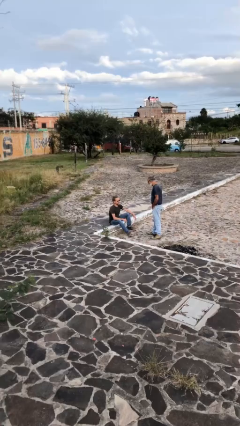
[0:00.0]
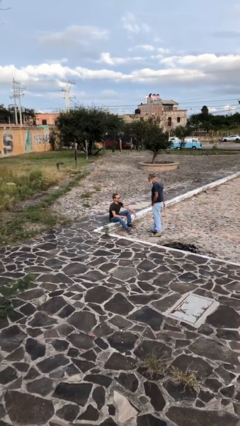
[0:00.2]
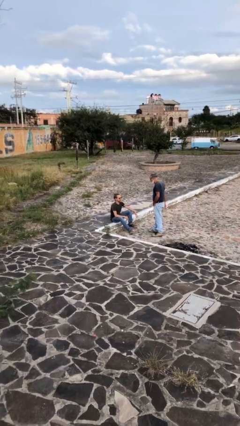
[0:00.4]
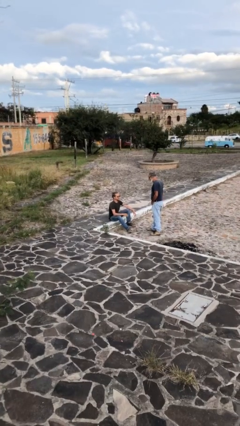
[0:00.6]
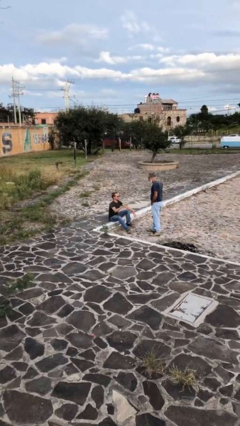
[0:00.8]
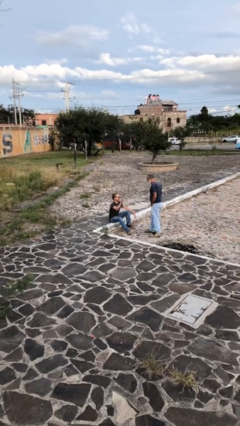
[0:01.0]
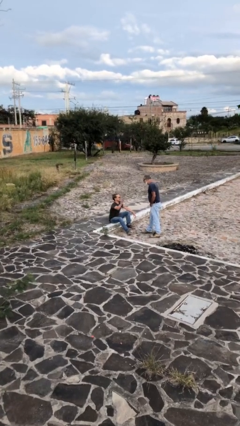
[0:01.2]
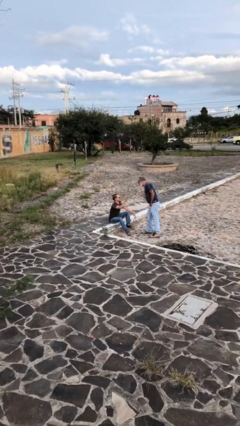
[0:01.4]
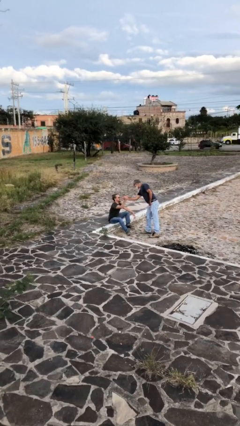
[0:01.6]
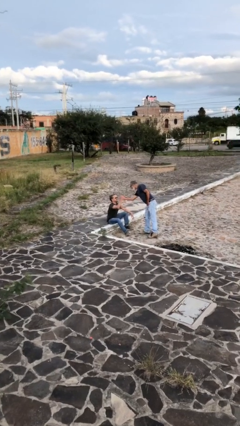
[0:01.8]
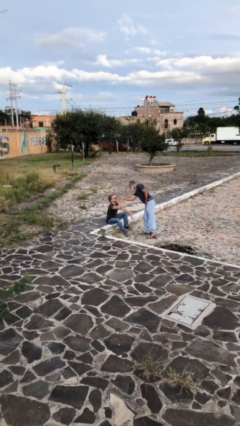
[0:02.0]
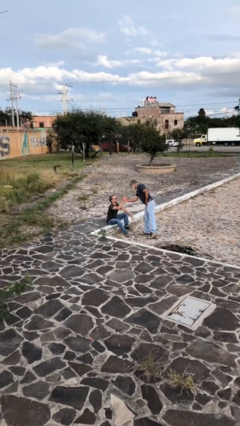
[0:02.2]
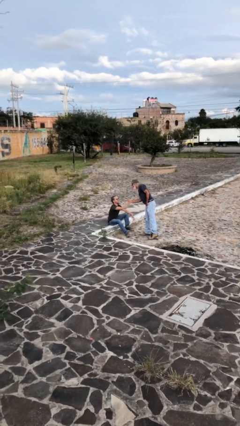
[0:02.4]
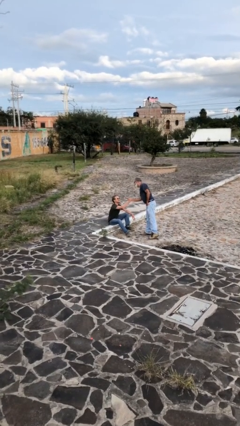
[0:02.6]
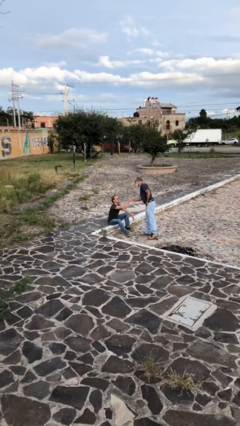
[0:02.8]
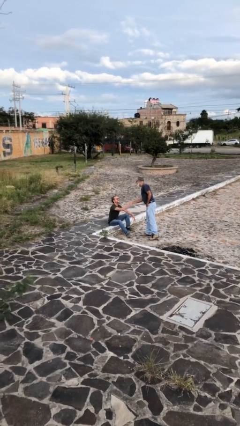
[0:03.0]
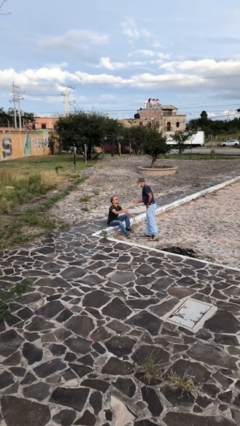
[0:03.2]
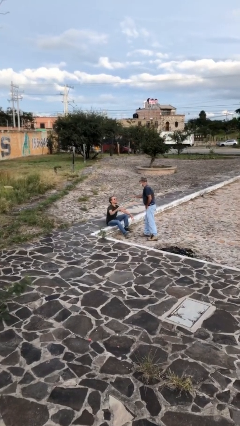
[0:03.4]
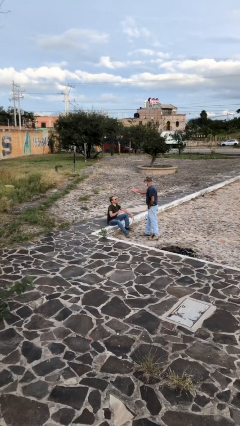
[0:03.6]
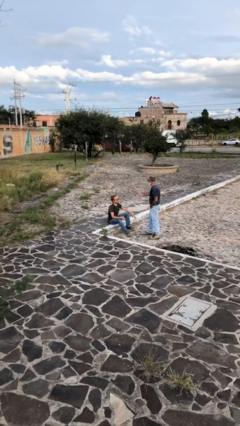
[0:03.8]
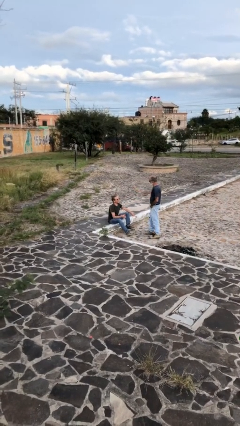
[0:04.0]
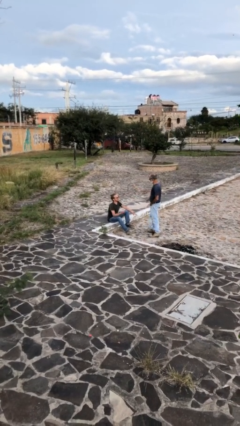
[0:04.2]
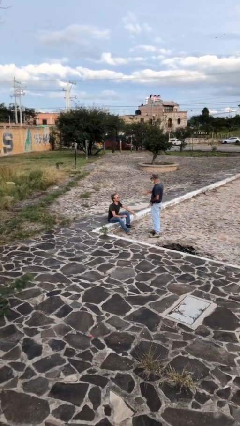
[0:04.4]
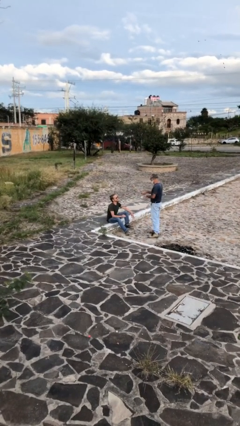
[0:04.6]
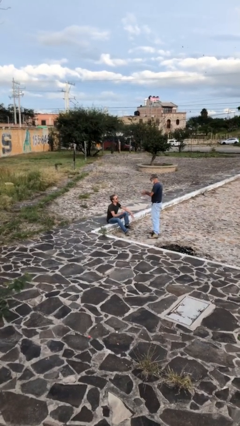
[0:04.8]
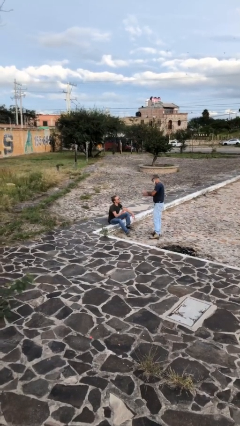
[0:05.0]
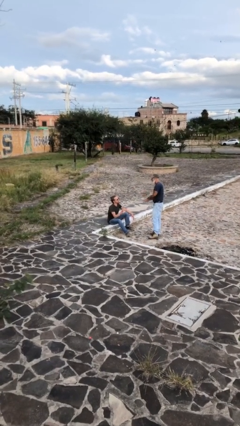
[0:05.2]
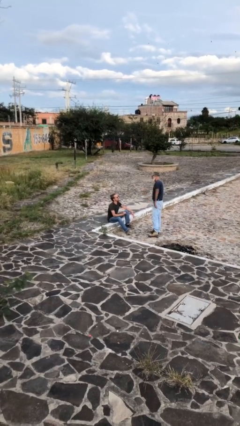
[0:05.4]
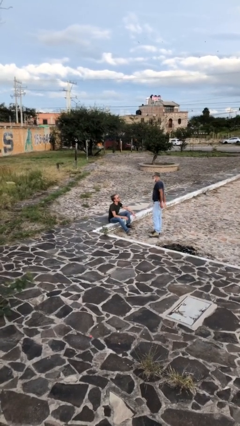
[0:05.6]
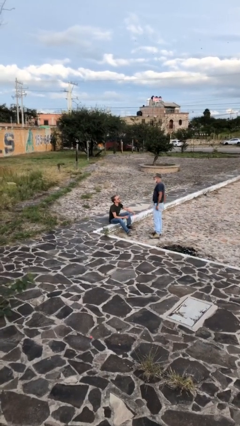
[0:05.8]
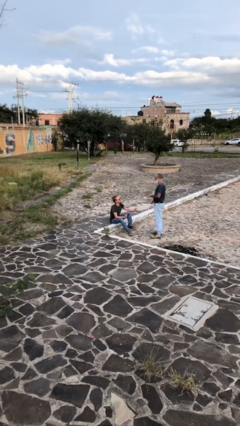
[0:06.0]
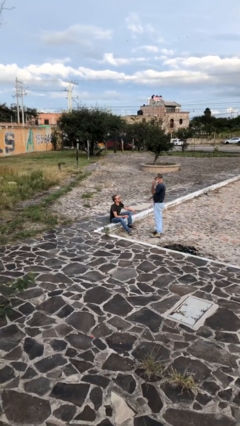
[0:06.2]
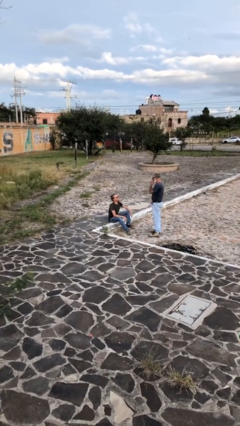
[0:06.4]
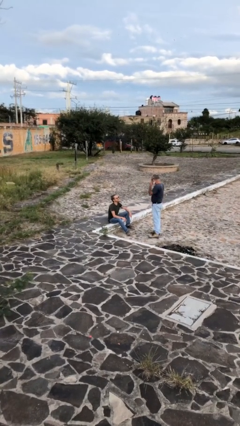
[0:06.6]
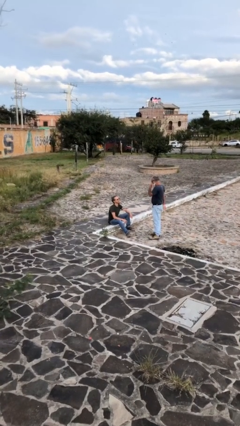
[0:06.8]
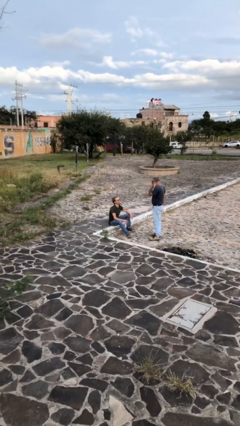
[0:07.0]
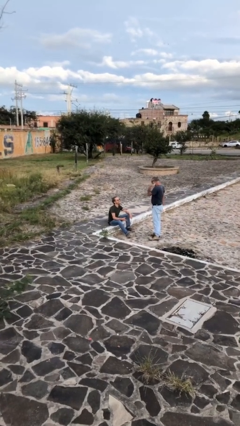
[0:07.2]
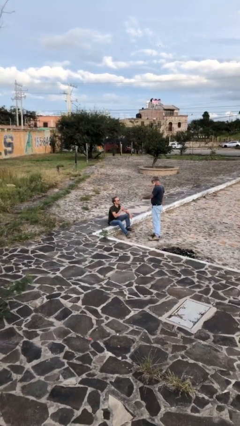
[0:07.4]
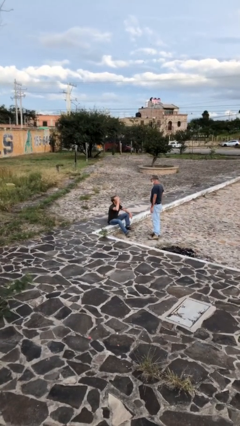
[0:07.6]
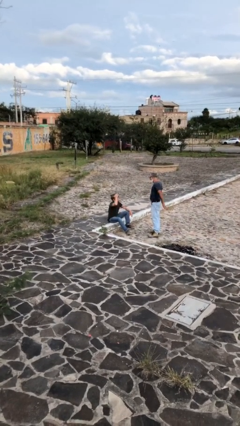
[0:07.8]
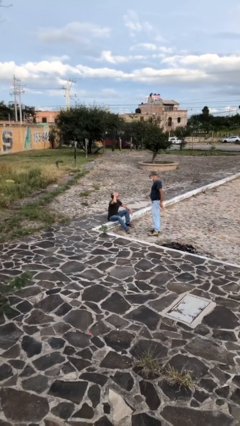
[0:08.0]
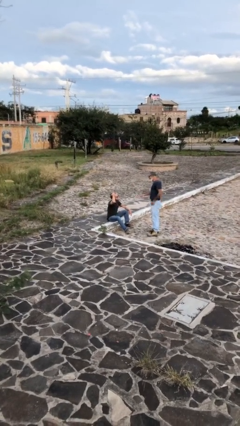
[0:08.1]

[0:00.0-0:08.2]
person shakes hand

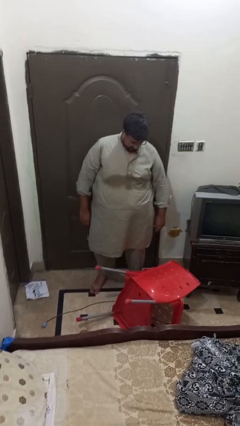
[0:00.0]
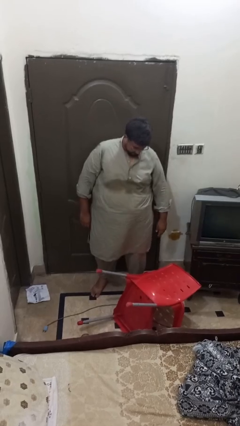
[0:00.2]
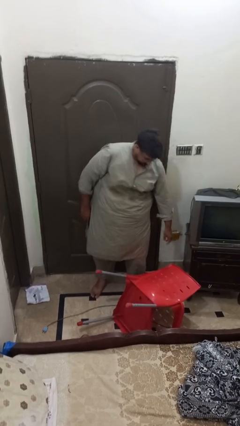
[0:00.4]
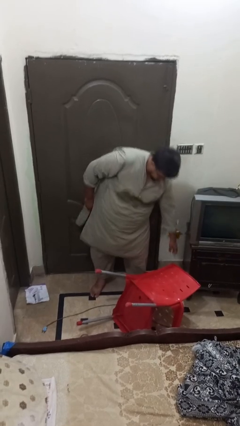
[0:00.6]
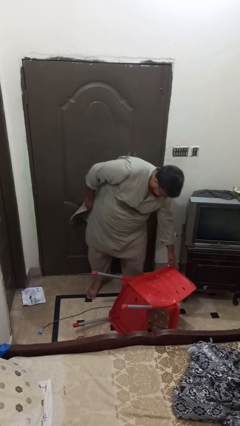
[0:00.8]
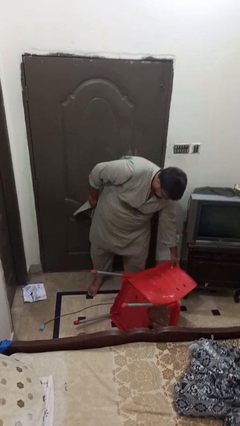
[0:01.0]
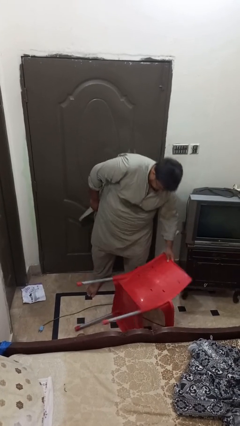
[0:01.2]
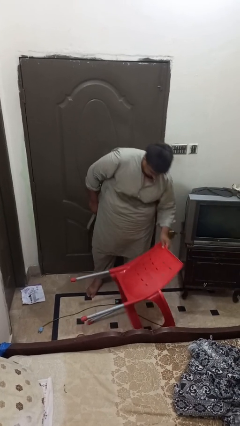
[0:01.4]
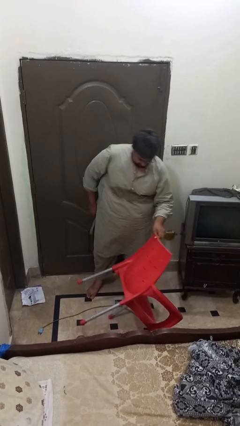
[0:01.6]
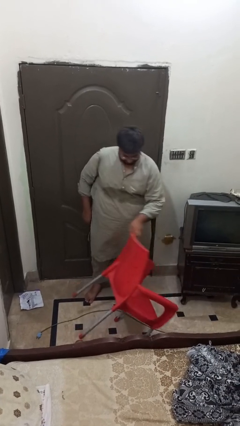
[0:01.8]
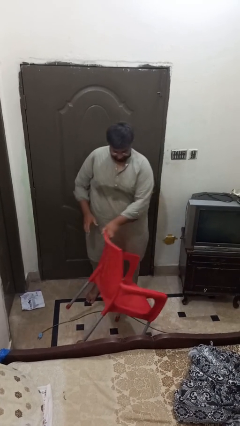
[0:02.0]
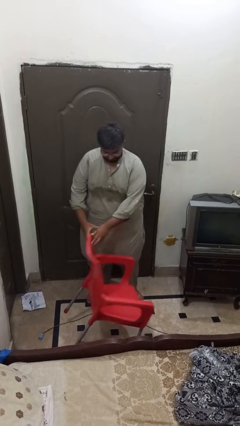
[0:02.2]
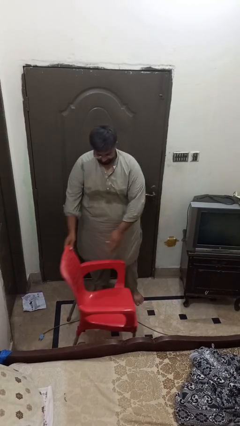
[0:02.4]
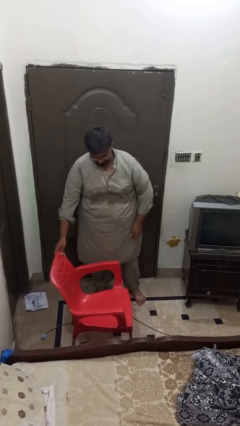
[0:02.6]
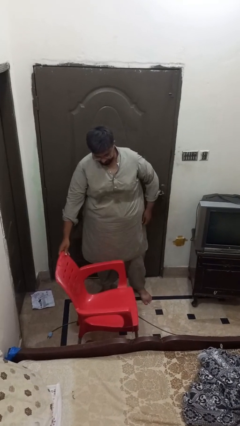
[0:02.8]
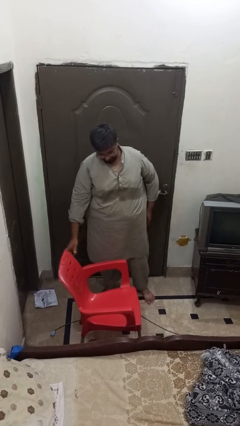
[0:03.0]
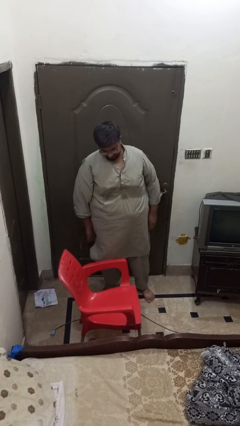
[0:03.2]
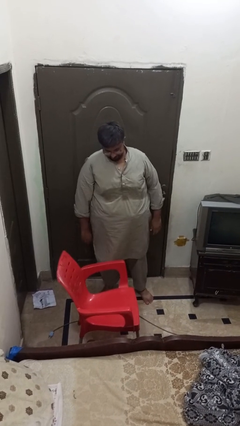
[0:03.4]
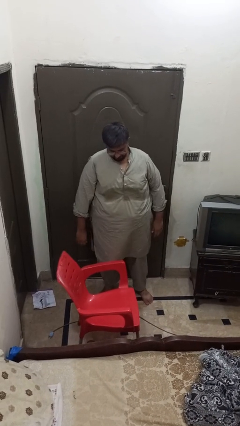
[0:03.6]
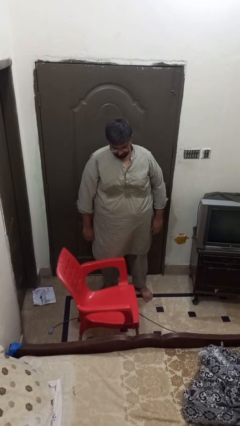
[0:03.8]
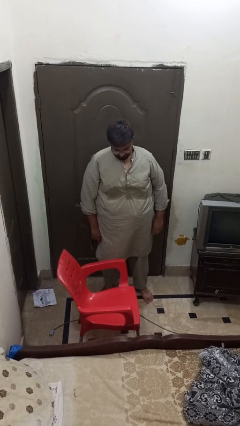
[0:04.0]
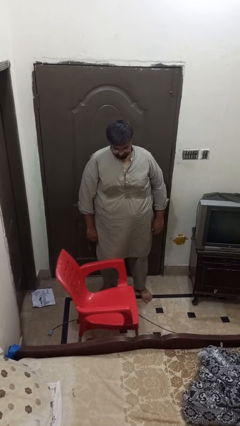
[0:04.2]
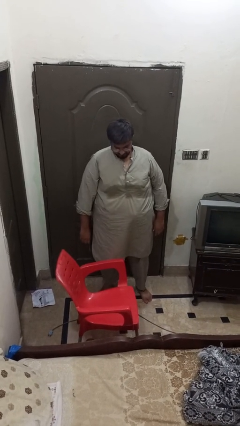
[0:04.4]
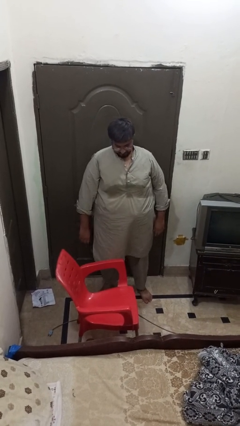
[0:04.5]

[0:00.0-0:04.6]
person sets upright furniture

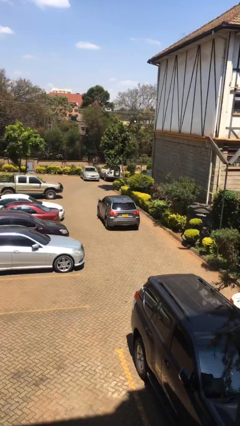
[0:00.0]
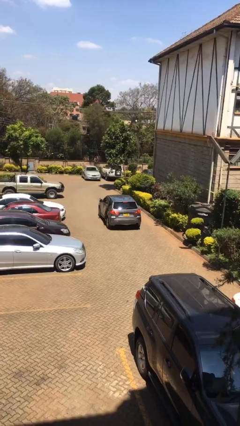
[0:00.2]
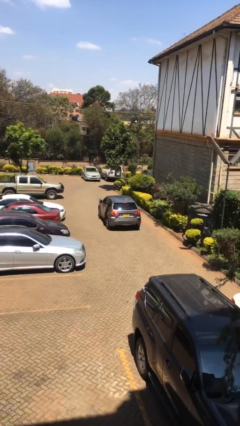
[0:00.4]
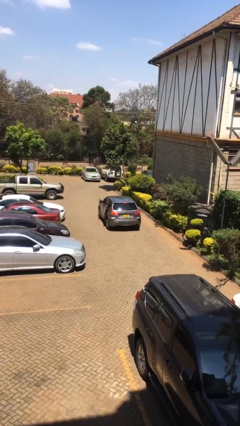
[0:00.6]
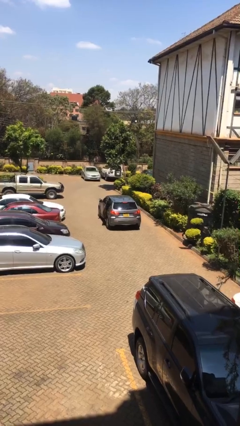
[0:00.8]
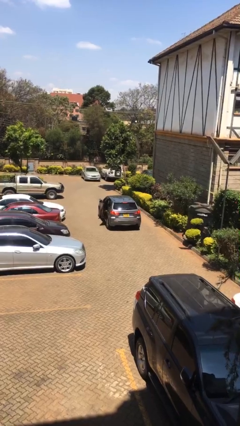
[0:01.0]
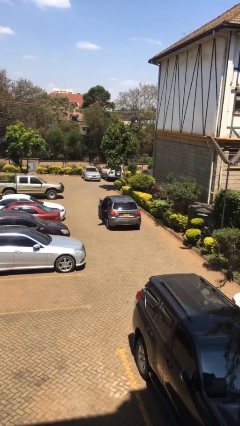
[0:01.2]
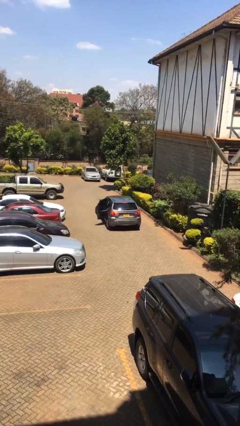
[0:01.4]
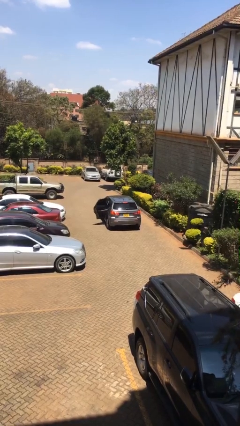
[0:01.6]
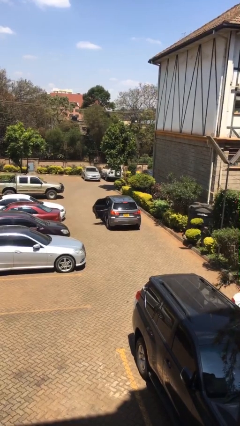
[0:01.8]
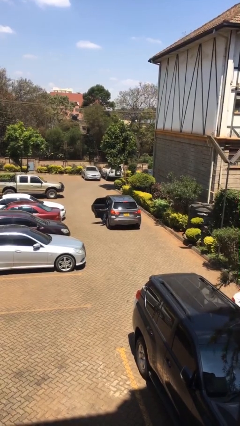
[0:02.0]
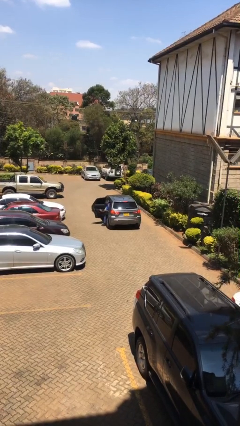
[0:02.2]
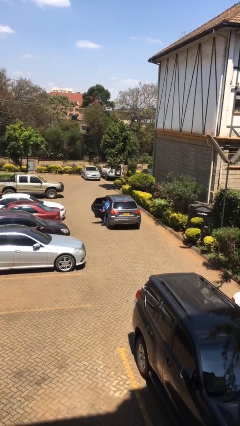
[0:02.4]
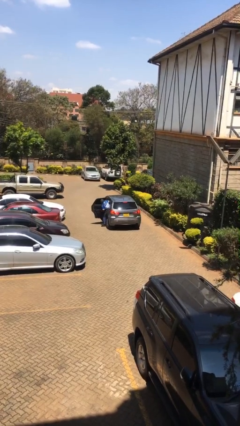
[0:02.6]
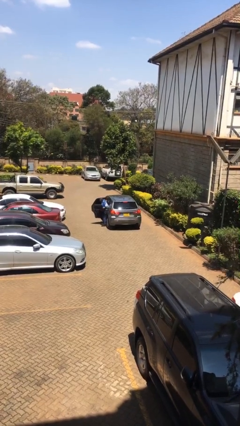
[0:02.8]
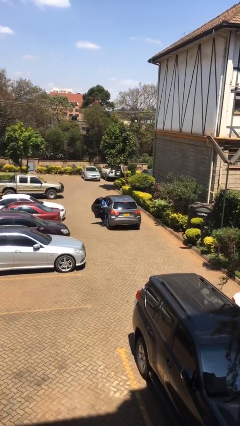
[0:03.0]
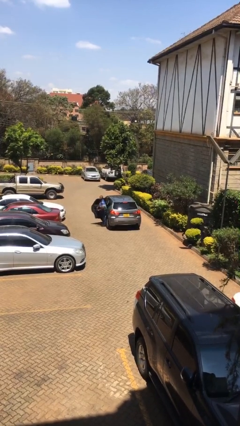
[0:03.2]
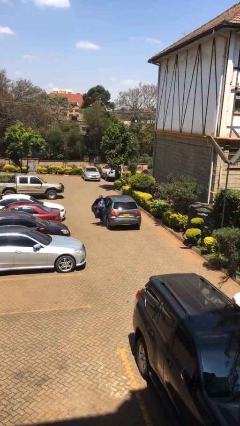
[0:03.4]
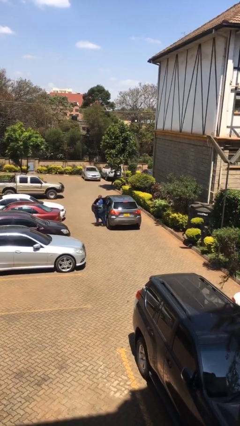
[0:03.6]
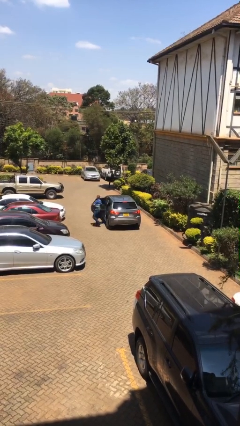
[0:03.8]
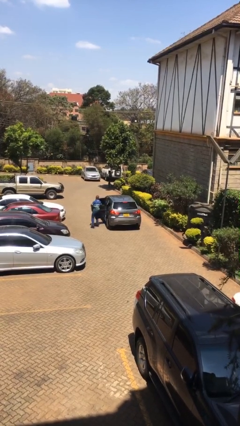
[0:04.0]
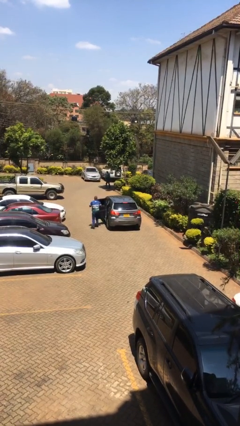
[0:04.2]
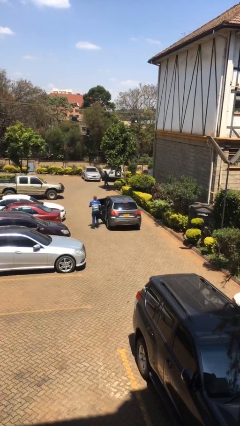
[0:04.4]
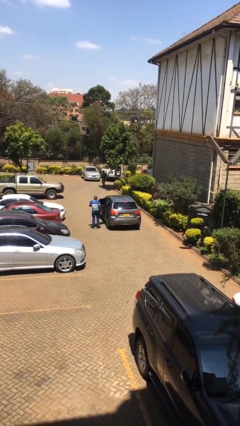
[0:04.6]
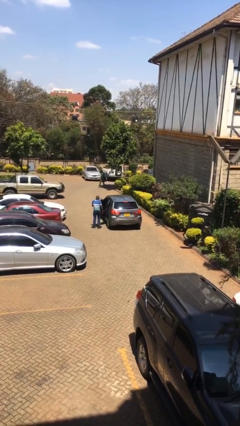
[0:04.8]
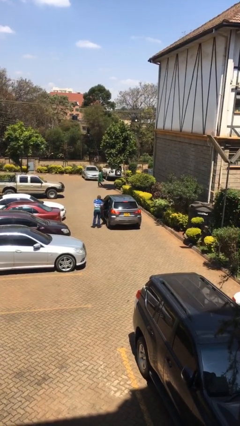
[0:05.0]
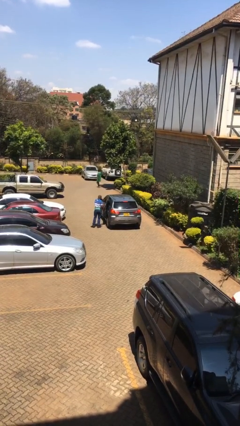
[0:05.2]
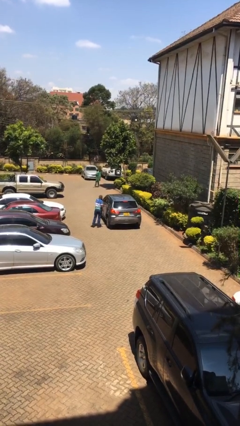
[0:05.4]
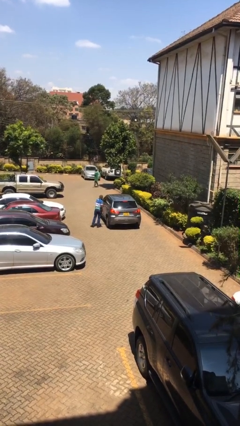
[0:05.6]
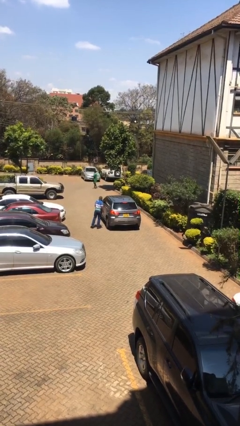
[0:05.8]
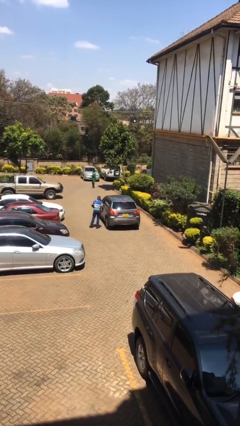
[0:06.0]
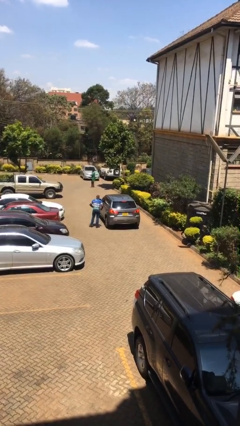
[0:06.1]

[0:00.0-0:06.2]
car drops off person
